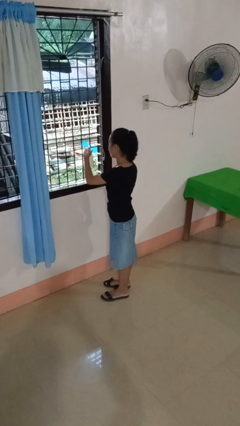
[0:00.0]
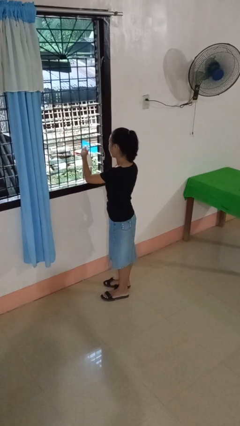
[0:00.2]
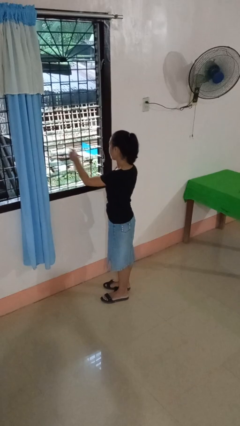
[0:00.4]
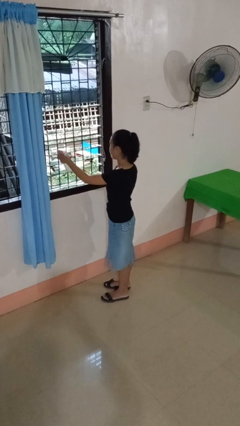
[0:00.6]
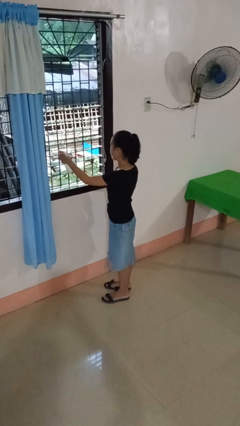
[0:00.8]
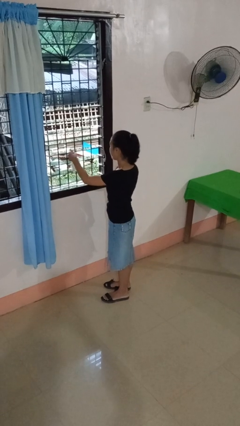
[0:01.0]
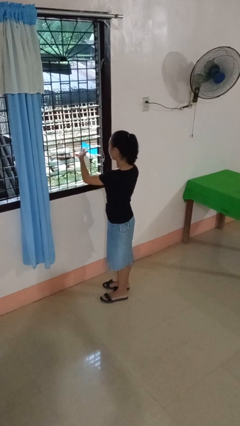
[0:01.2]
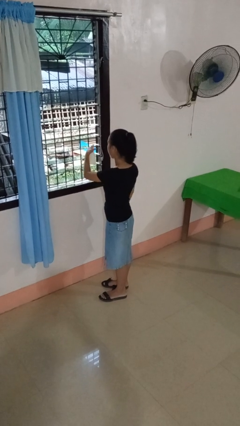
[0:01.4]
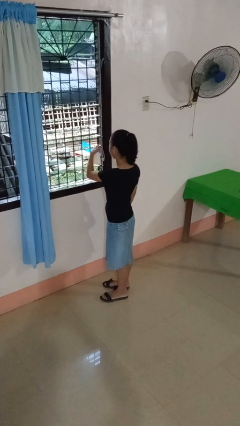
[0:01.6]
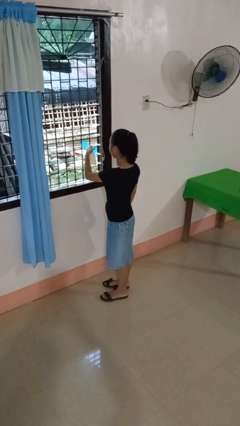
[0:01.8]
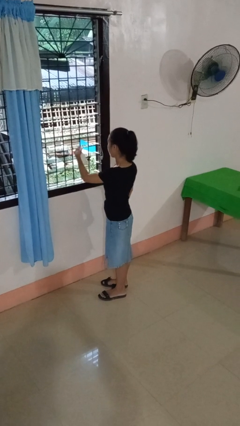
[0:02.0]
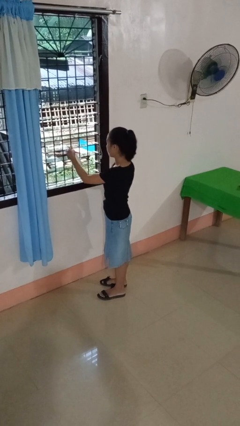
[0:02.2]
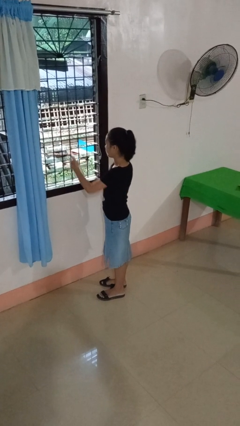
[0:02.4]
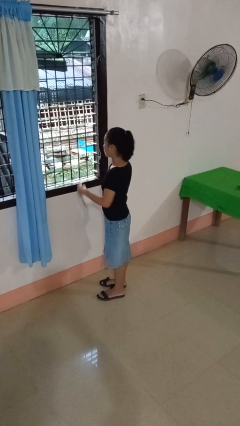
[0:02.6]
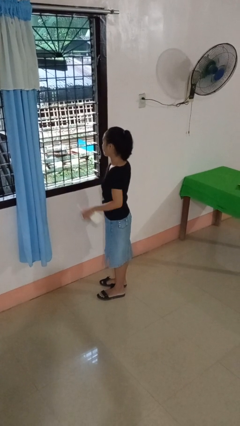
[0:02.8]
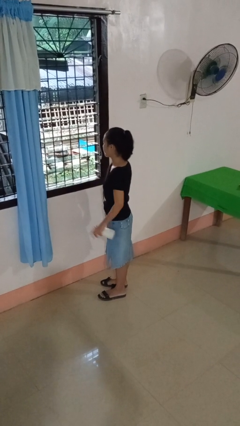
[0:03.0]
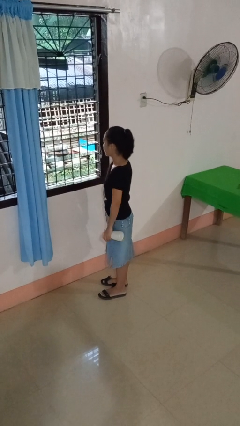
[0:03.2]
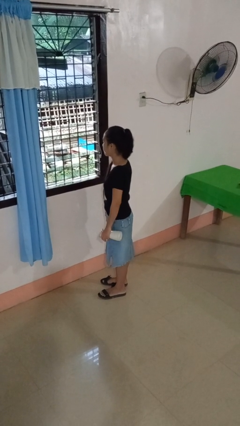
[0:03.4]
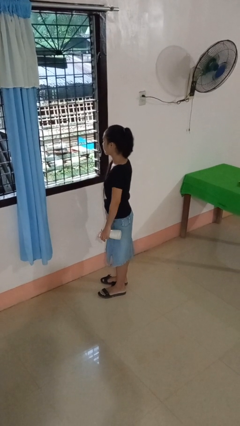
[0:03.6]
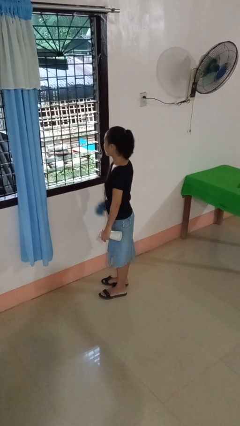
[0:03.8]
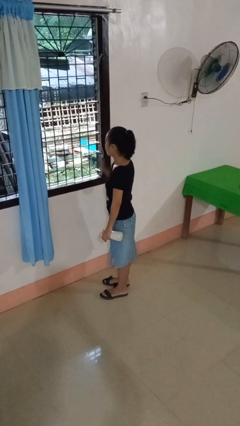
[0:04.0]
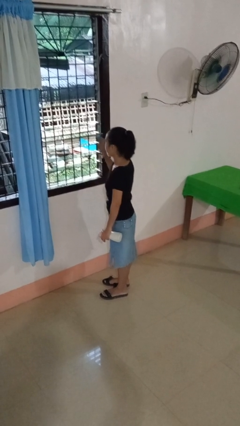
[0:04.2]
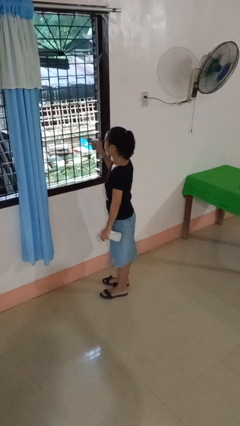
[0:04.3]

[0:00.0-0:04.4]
person sprays from bottle

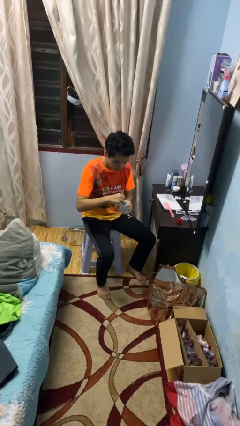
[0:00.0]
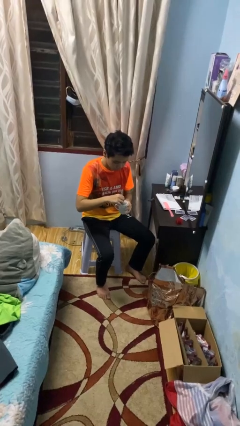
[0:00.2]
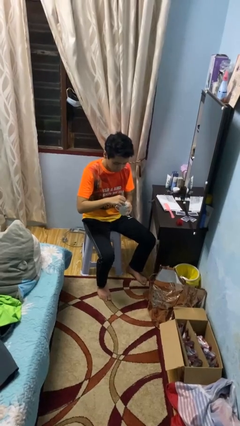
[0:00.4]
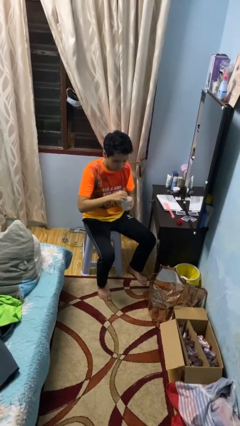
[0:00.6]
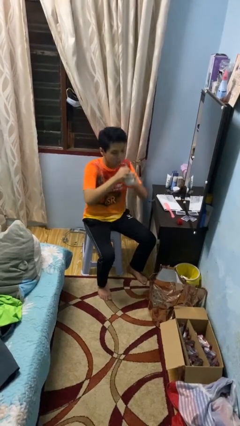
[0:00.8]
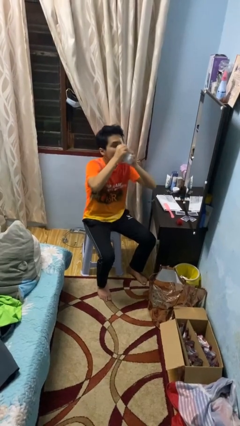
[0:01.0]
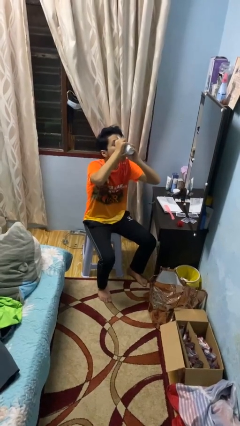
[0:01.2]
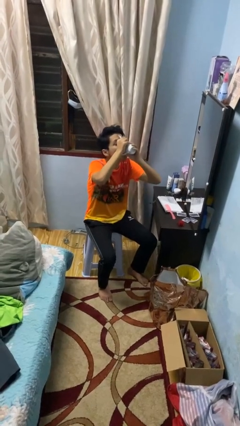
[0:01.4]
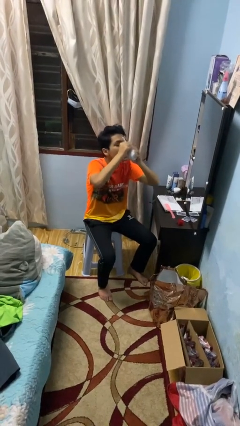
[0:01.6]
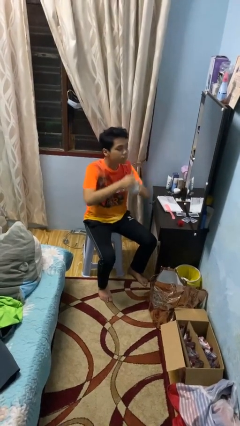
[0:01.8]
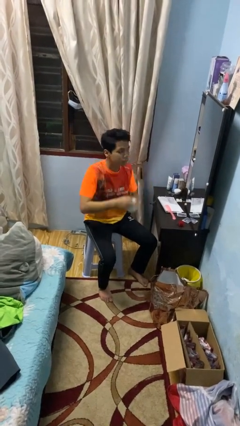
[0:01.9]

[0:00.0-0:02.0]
person drinks from mug

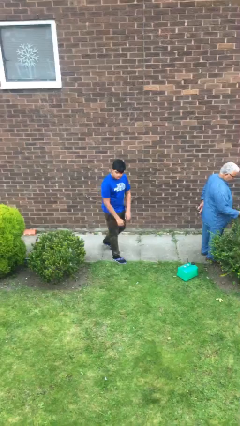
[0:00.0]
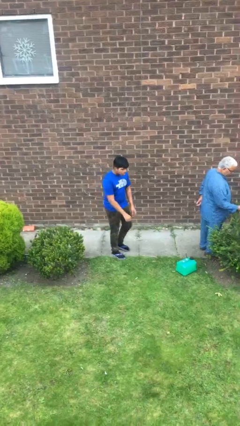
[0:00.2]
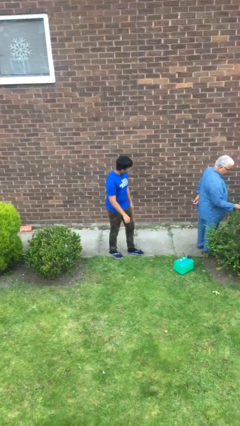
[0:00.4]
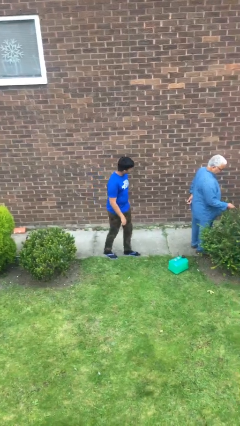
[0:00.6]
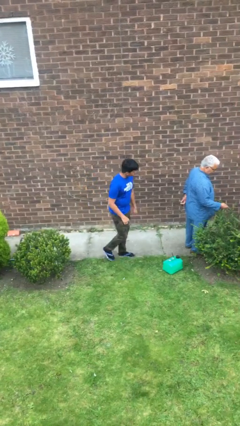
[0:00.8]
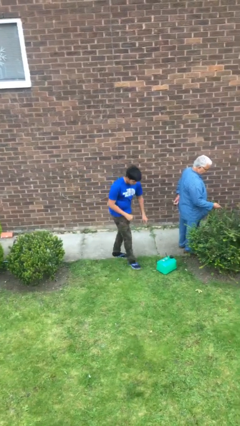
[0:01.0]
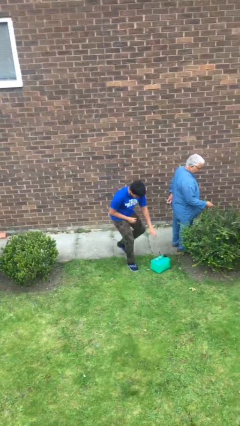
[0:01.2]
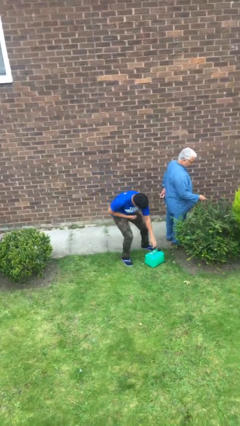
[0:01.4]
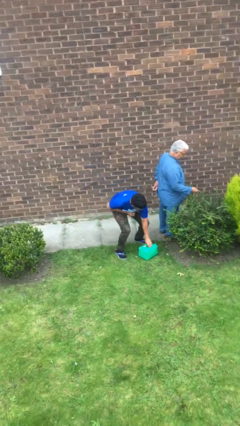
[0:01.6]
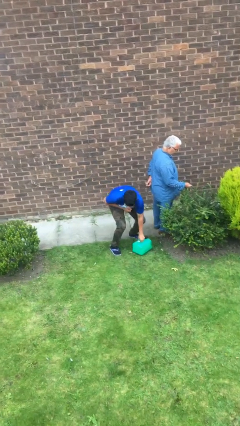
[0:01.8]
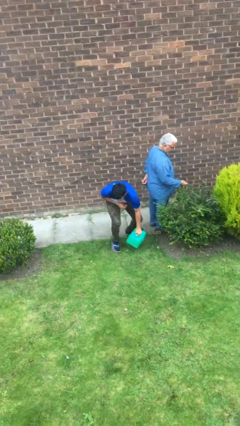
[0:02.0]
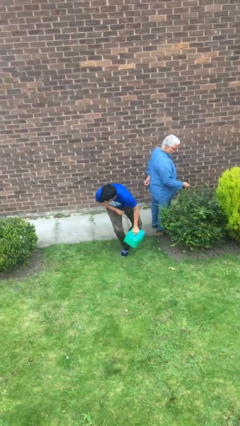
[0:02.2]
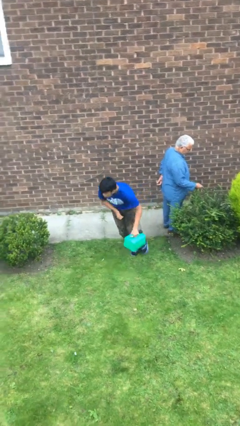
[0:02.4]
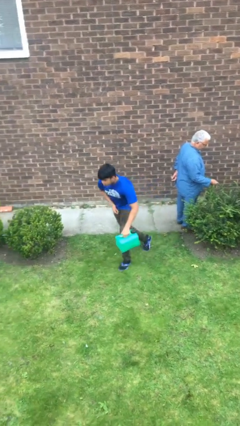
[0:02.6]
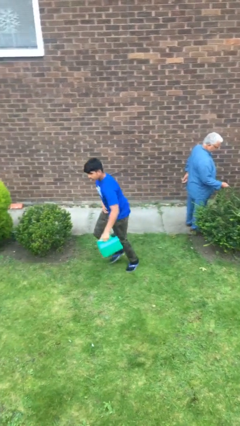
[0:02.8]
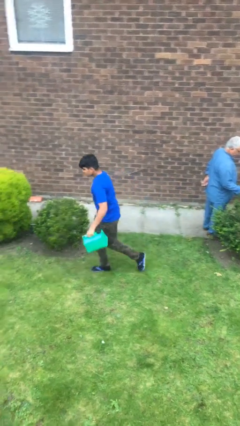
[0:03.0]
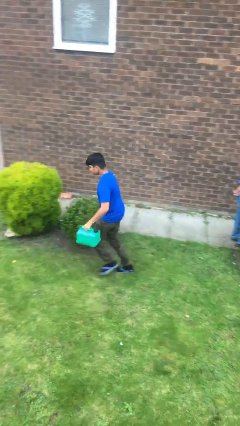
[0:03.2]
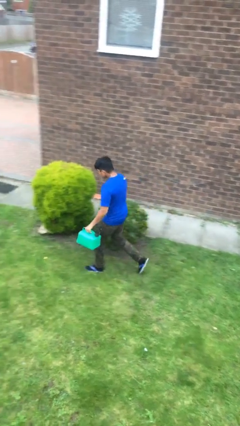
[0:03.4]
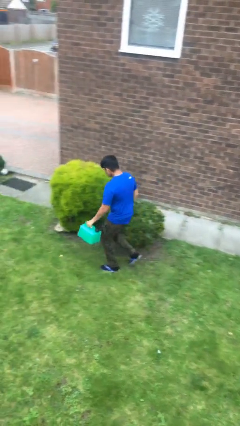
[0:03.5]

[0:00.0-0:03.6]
person steals object from person

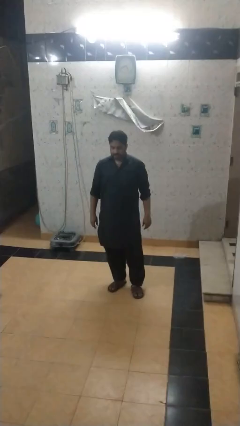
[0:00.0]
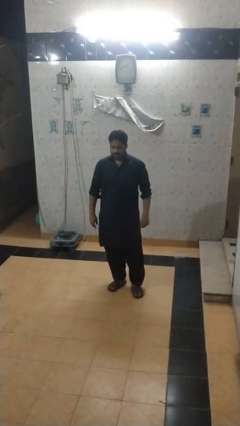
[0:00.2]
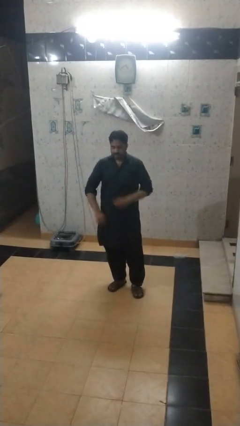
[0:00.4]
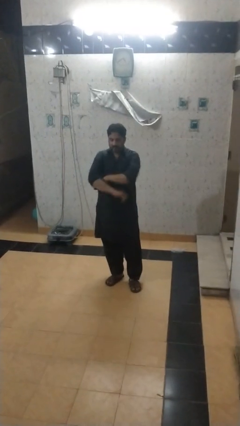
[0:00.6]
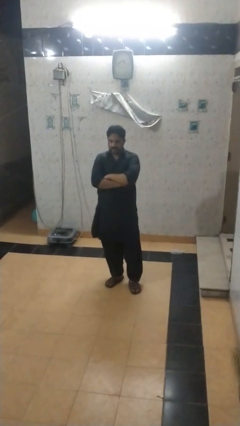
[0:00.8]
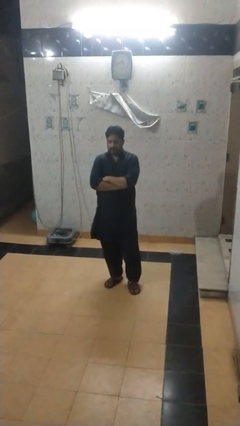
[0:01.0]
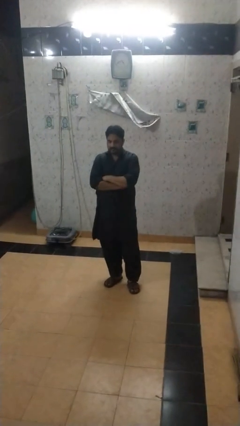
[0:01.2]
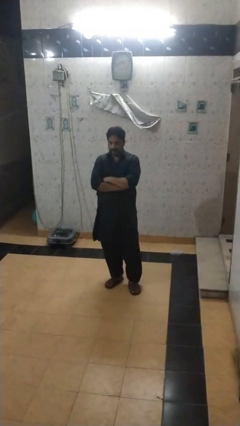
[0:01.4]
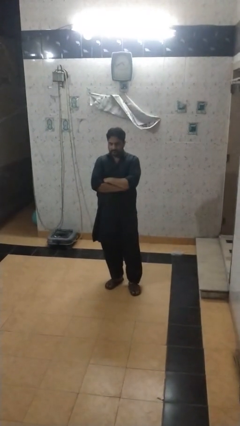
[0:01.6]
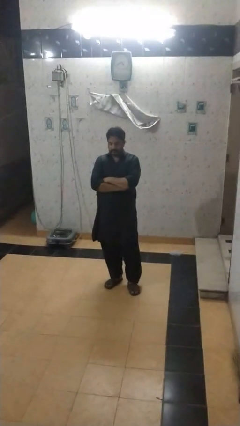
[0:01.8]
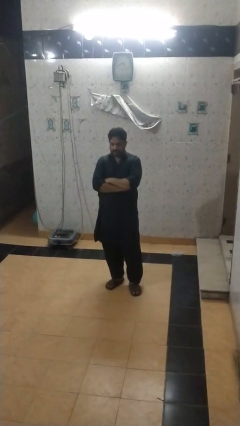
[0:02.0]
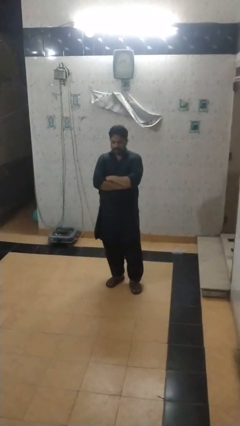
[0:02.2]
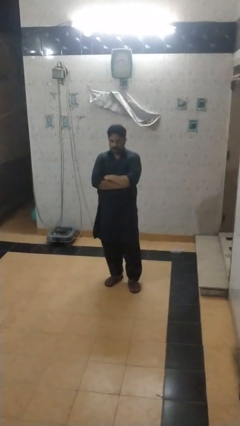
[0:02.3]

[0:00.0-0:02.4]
person crosses arms

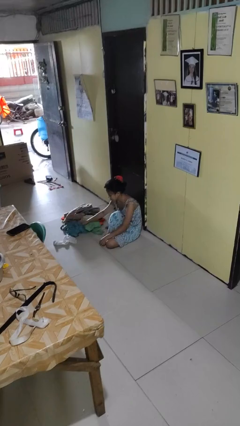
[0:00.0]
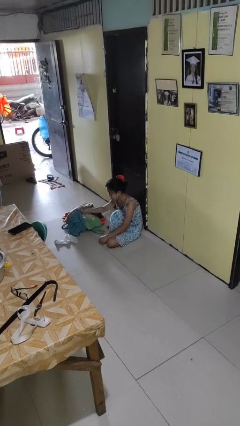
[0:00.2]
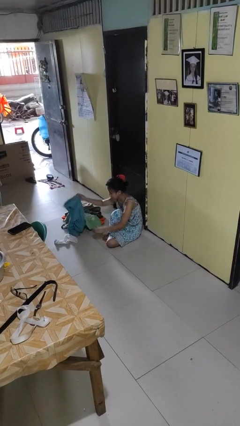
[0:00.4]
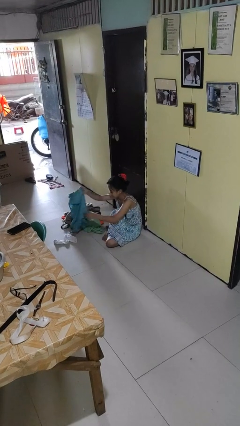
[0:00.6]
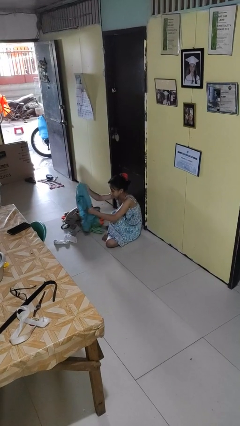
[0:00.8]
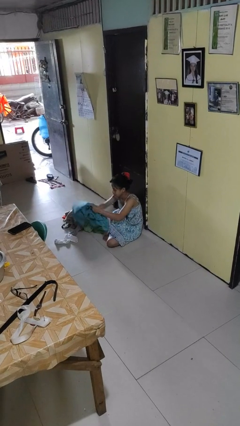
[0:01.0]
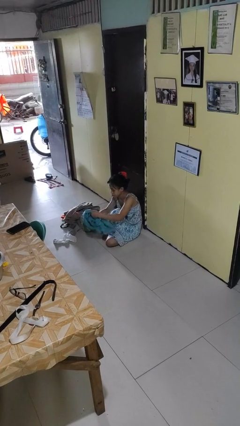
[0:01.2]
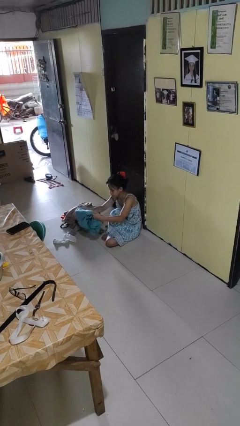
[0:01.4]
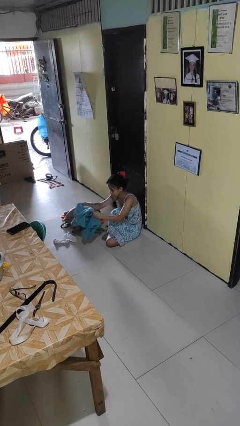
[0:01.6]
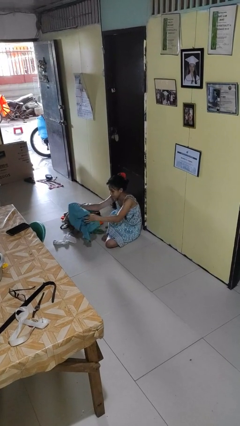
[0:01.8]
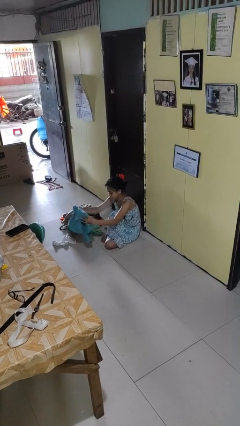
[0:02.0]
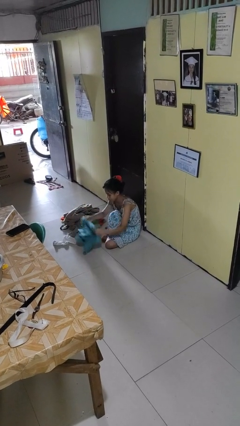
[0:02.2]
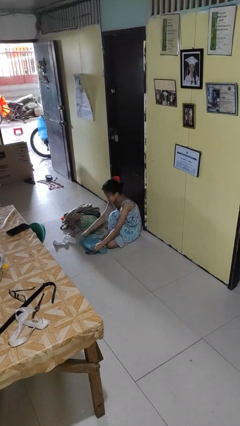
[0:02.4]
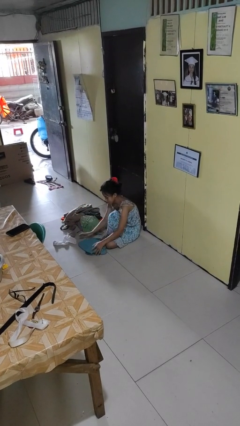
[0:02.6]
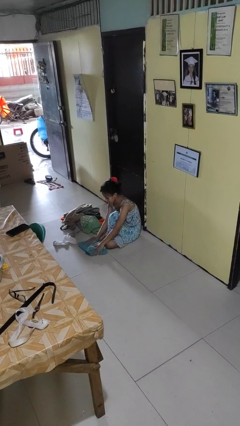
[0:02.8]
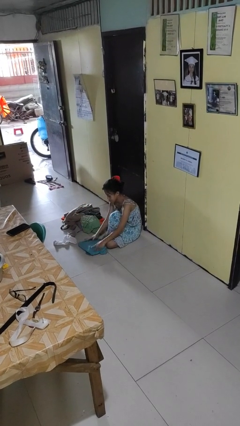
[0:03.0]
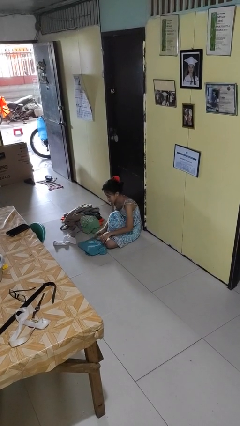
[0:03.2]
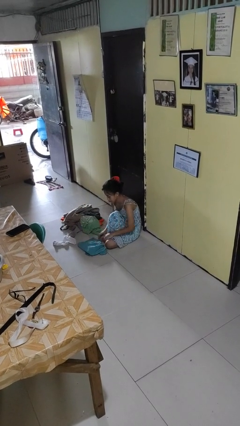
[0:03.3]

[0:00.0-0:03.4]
person folds shirt

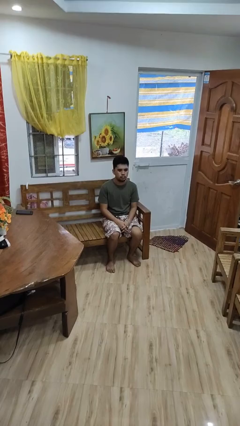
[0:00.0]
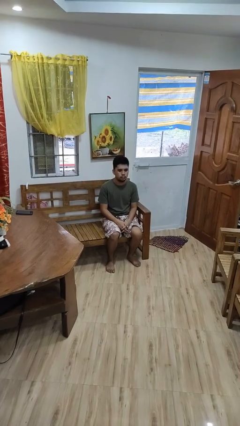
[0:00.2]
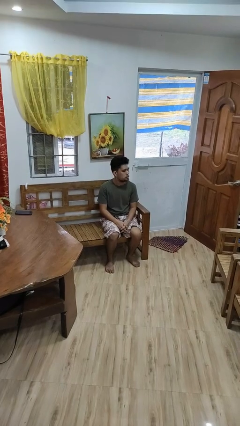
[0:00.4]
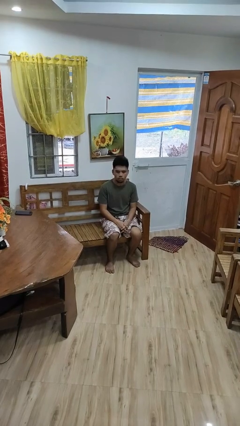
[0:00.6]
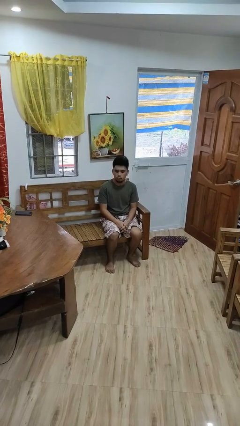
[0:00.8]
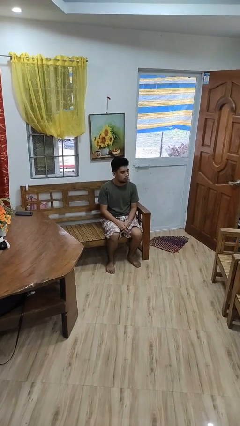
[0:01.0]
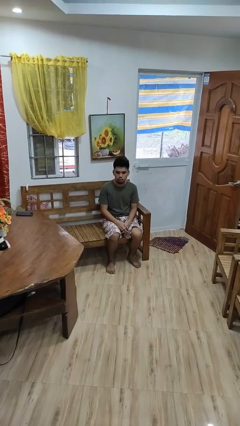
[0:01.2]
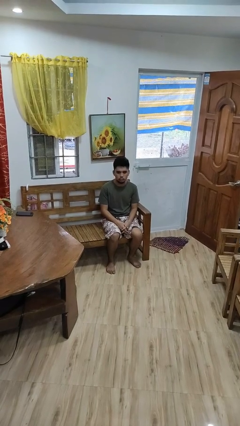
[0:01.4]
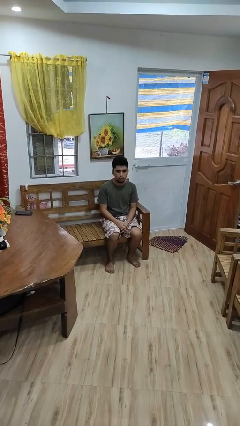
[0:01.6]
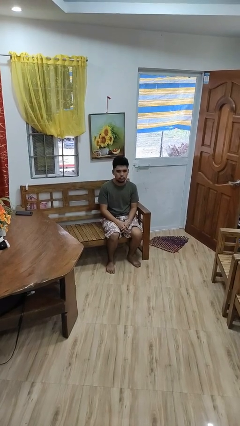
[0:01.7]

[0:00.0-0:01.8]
person shakes head
